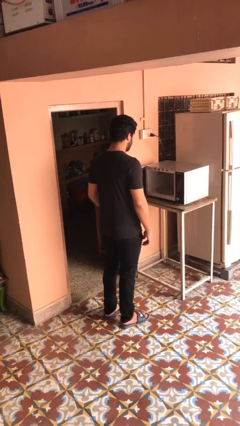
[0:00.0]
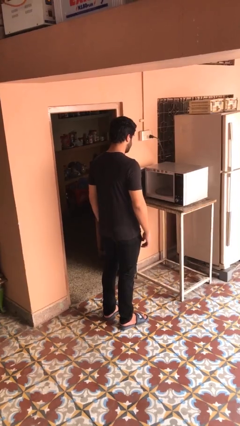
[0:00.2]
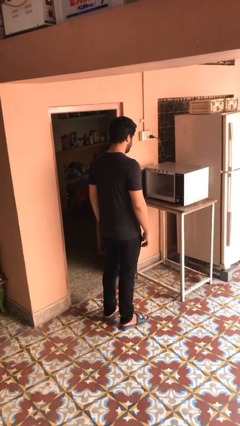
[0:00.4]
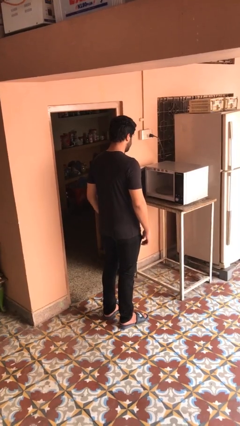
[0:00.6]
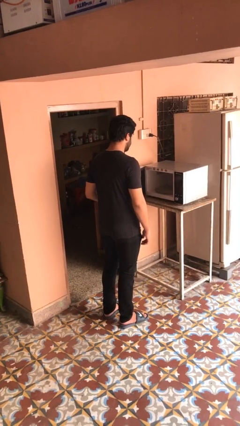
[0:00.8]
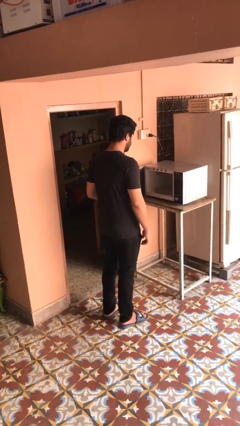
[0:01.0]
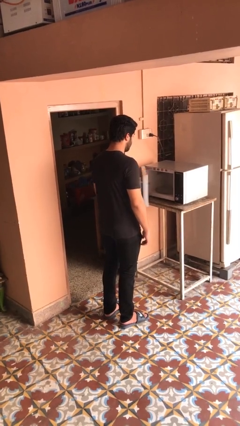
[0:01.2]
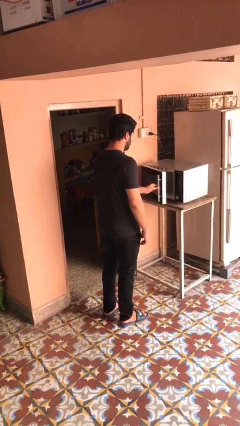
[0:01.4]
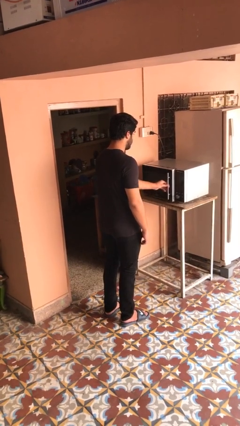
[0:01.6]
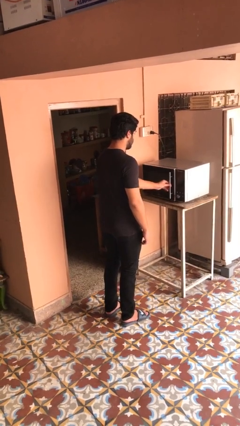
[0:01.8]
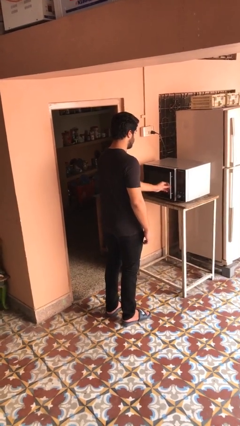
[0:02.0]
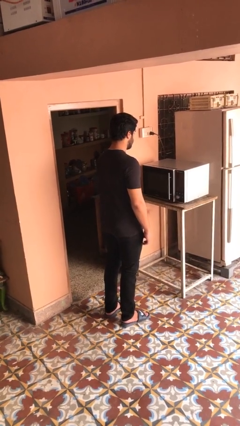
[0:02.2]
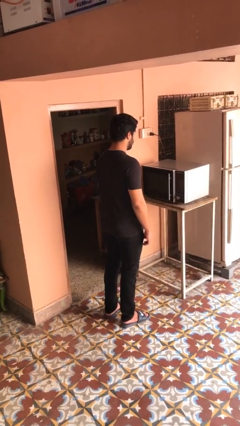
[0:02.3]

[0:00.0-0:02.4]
person closes microwave

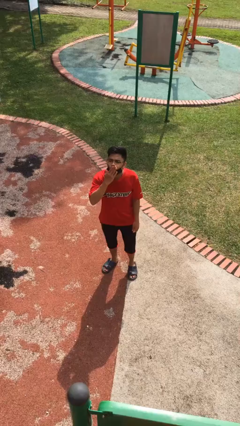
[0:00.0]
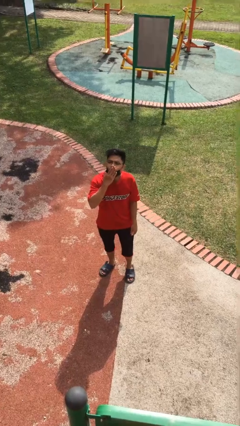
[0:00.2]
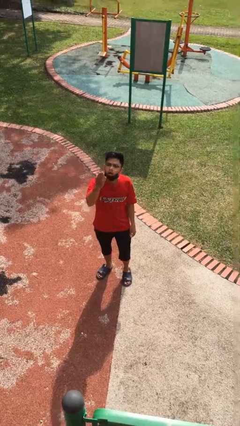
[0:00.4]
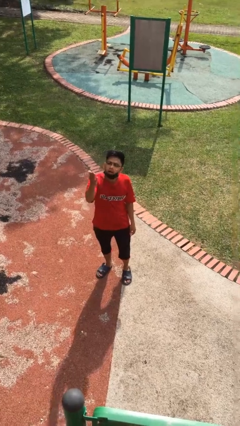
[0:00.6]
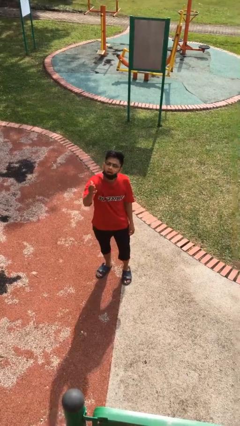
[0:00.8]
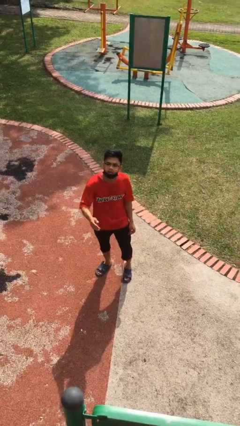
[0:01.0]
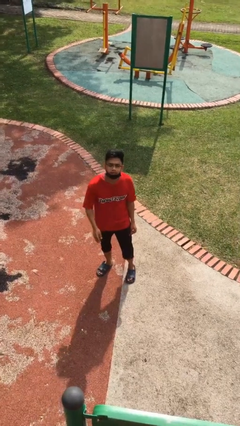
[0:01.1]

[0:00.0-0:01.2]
person gestures blow kiss

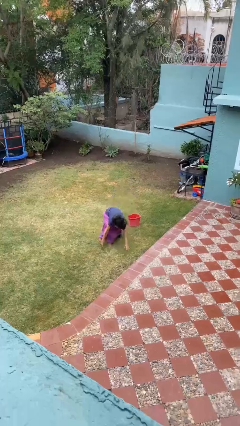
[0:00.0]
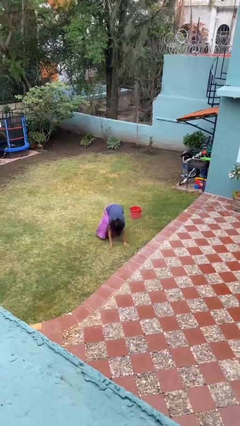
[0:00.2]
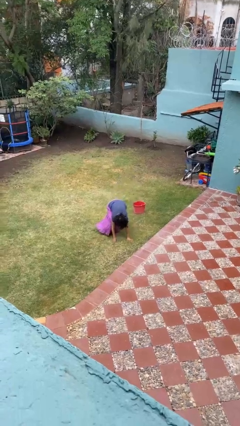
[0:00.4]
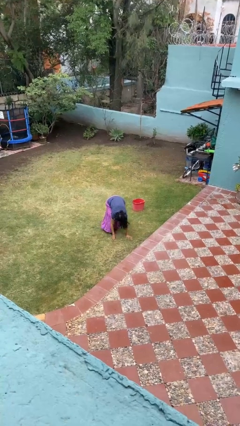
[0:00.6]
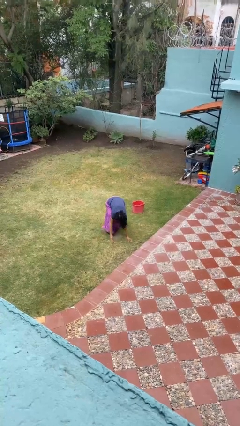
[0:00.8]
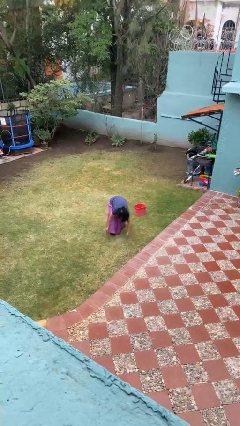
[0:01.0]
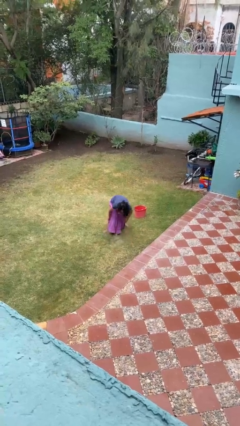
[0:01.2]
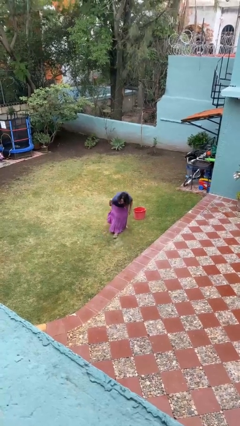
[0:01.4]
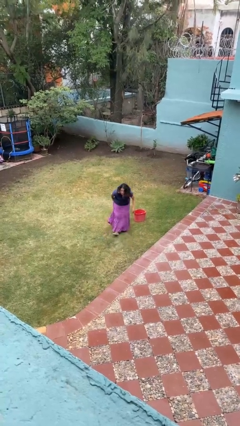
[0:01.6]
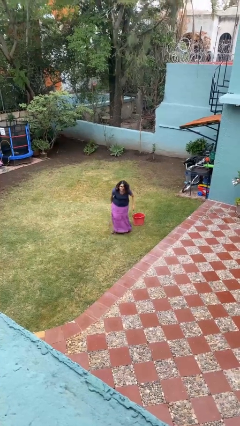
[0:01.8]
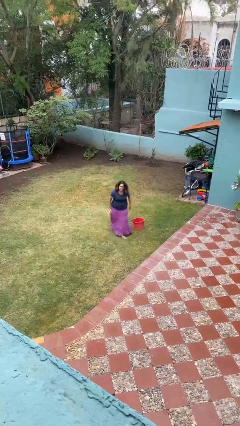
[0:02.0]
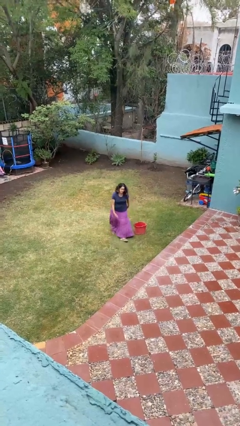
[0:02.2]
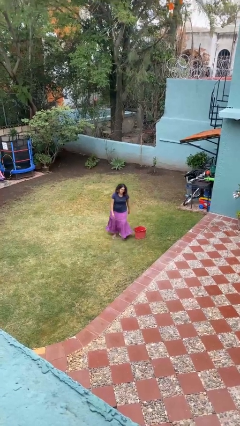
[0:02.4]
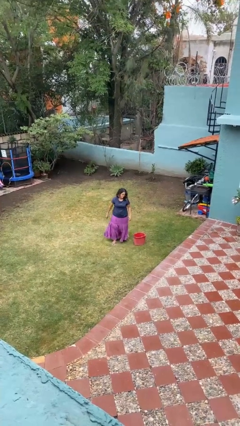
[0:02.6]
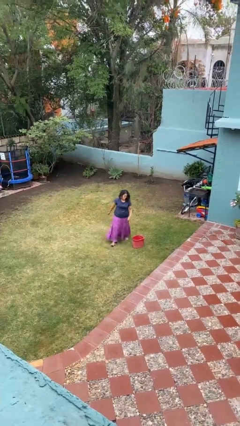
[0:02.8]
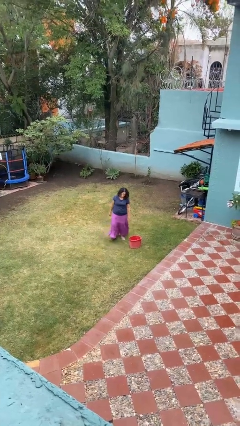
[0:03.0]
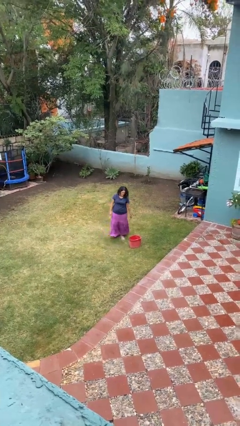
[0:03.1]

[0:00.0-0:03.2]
person stands up from floor

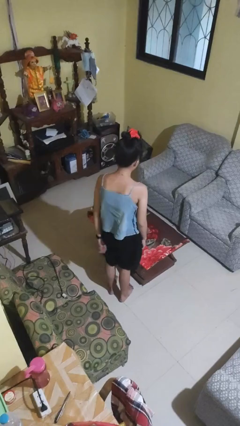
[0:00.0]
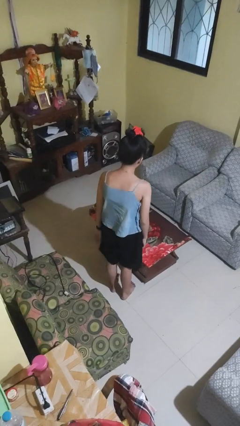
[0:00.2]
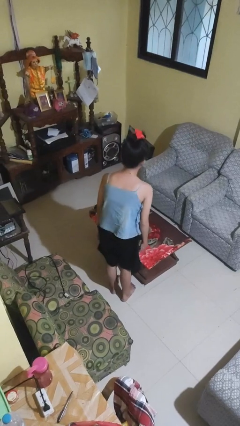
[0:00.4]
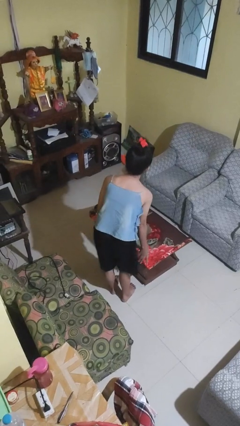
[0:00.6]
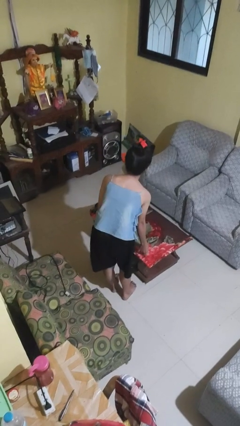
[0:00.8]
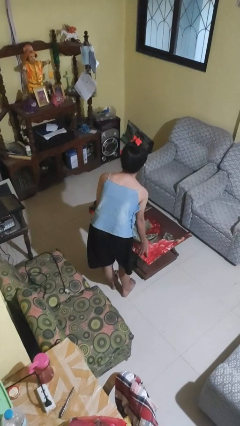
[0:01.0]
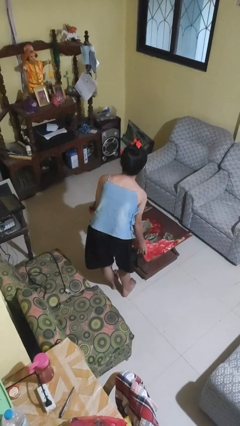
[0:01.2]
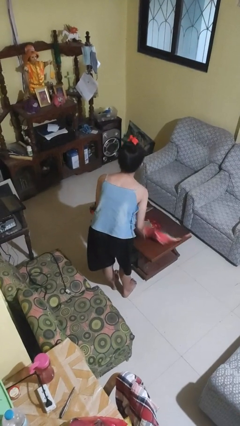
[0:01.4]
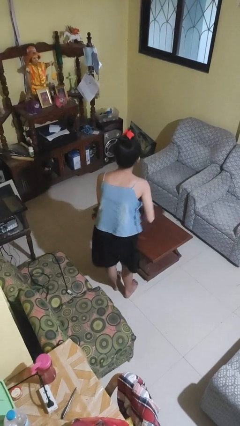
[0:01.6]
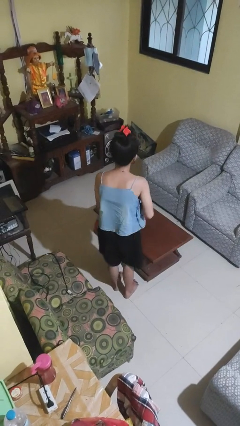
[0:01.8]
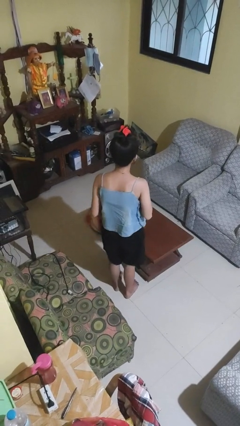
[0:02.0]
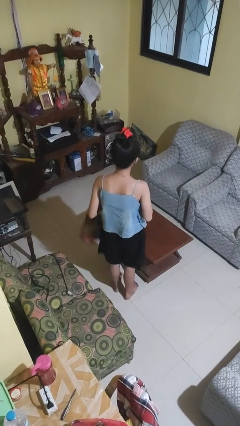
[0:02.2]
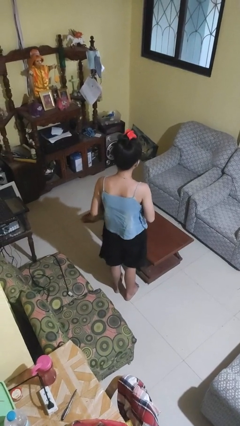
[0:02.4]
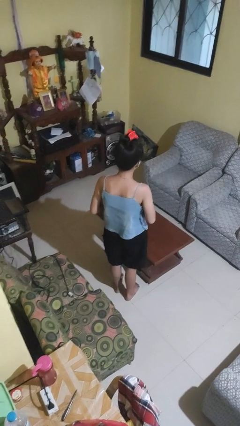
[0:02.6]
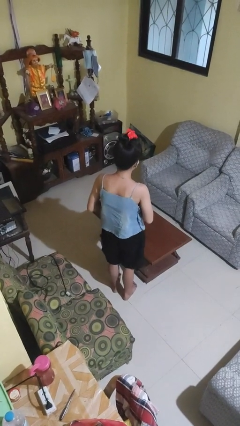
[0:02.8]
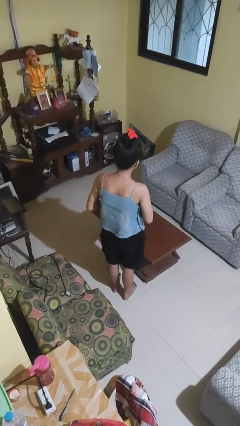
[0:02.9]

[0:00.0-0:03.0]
person folds tablecloth

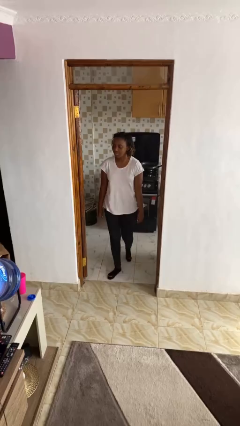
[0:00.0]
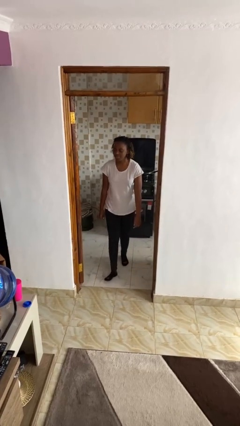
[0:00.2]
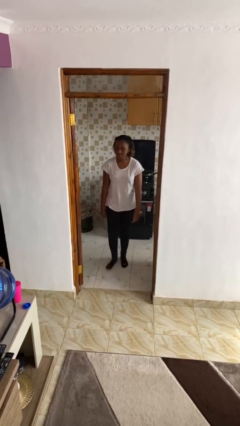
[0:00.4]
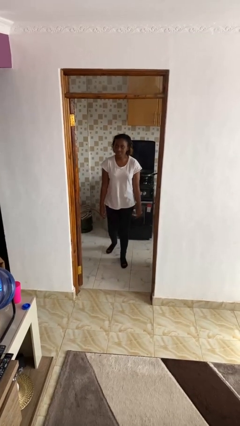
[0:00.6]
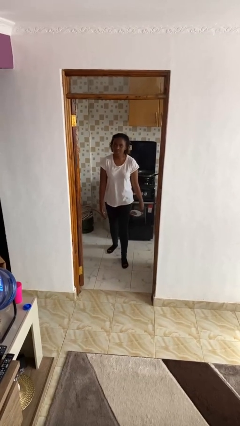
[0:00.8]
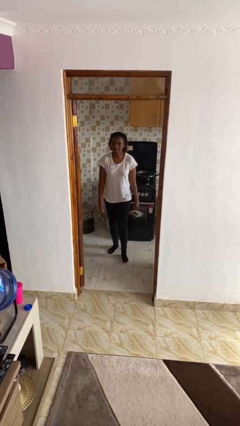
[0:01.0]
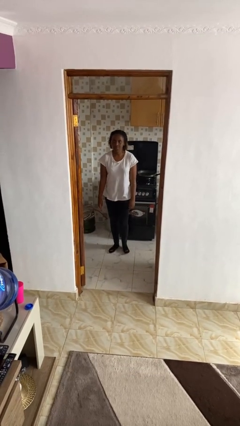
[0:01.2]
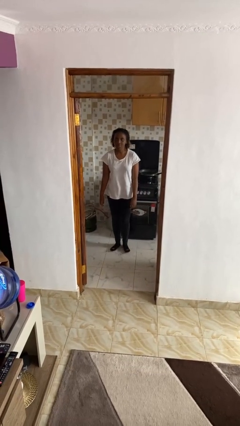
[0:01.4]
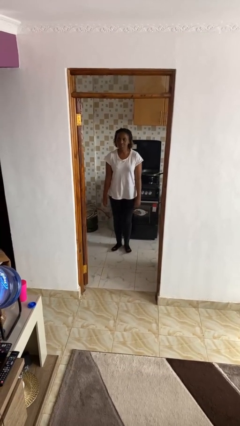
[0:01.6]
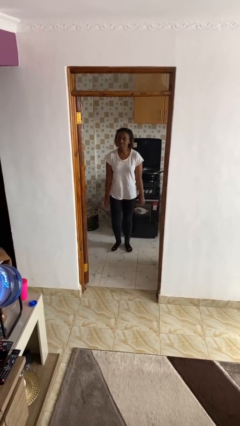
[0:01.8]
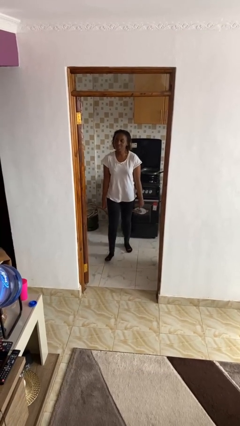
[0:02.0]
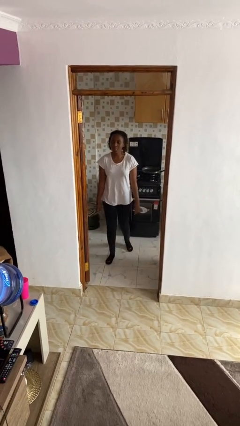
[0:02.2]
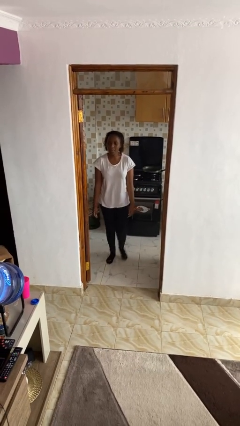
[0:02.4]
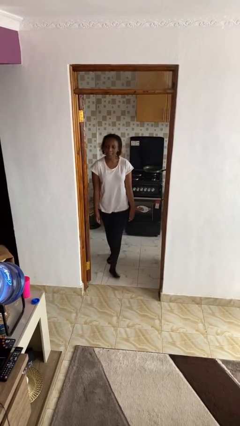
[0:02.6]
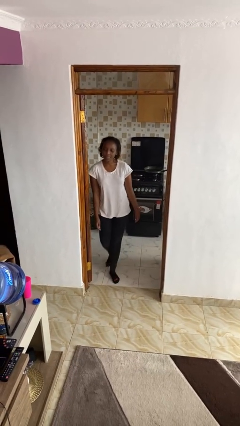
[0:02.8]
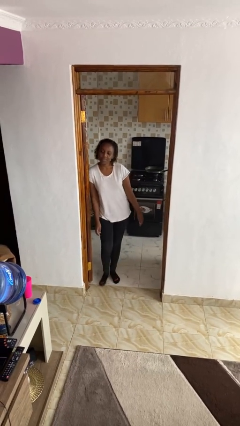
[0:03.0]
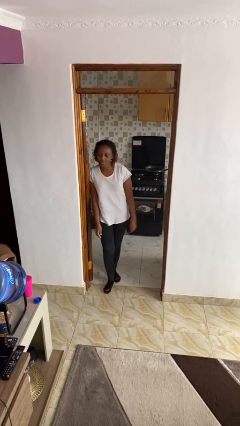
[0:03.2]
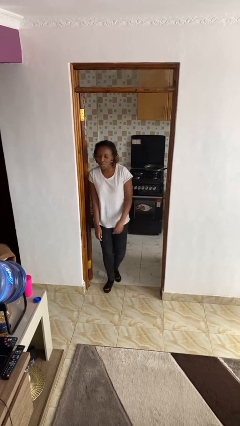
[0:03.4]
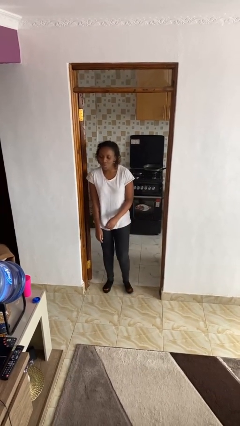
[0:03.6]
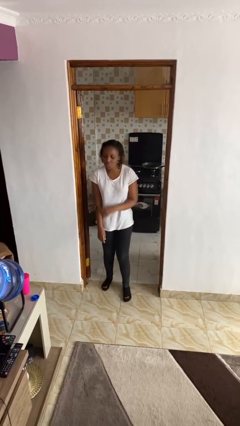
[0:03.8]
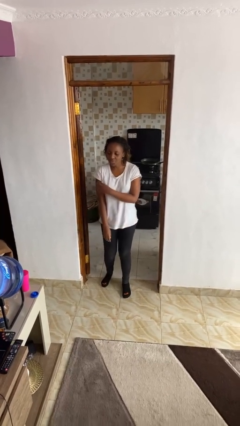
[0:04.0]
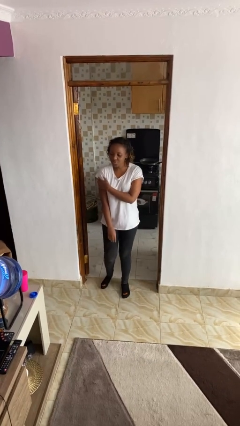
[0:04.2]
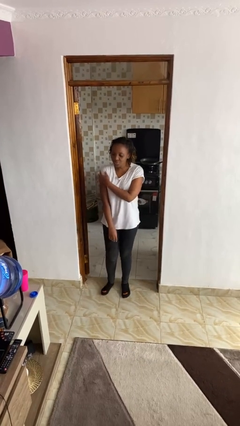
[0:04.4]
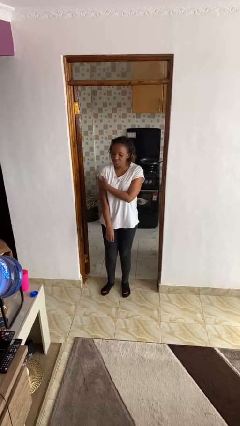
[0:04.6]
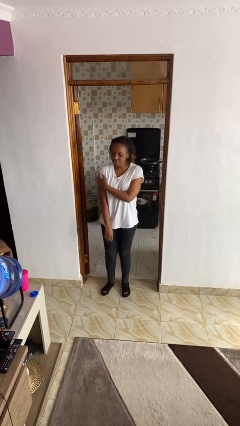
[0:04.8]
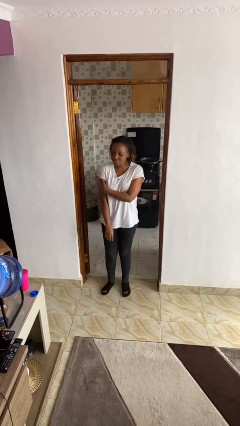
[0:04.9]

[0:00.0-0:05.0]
person bumps into wall

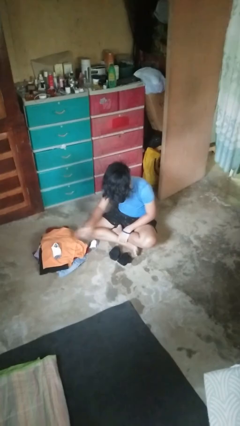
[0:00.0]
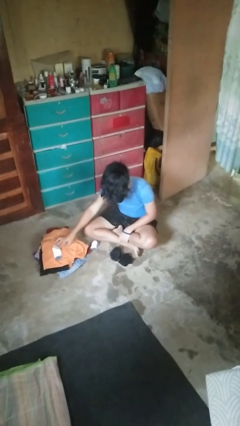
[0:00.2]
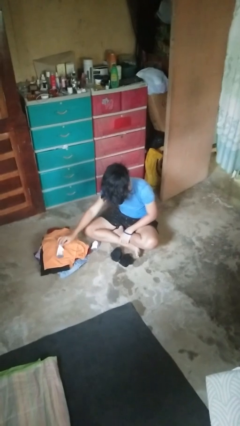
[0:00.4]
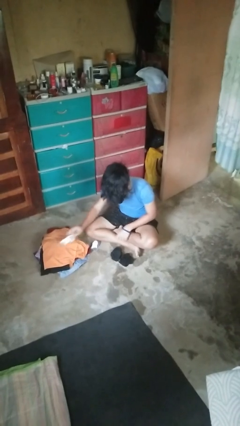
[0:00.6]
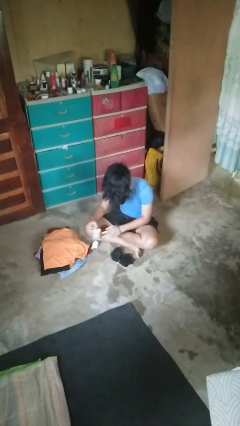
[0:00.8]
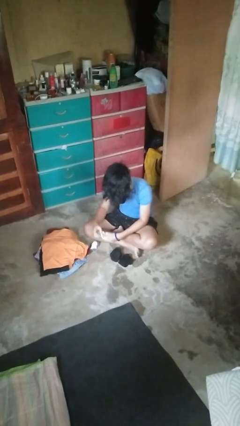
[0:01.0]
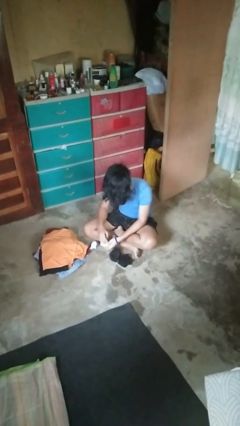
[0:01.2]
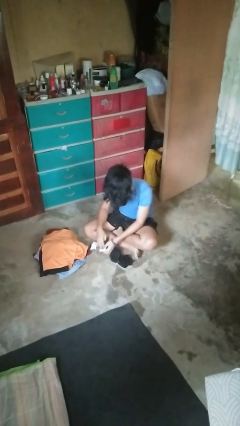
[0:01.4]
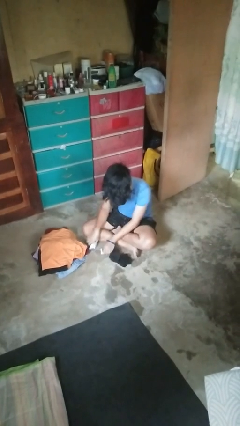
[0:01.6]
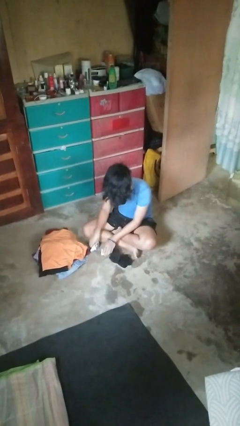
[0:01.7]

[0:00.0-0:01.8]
person folds socks

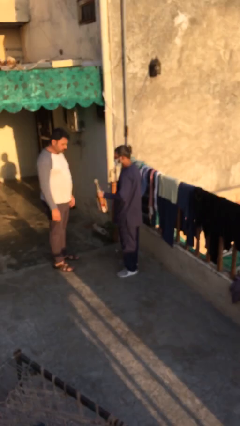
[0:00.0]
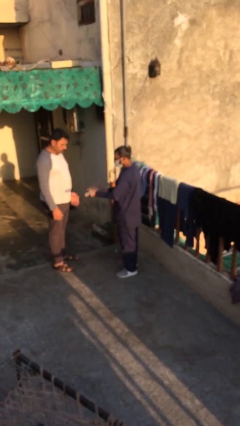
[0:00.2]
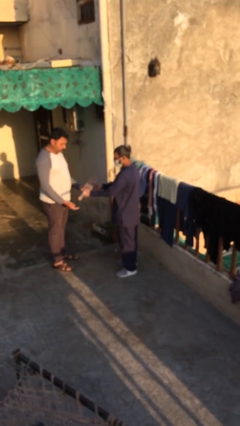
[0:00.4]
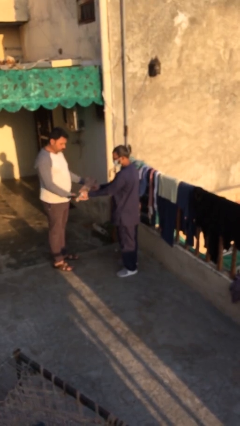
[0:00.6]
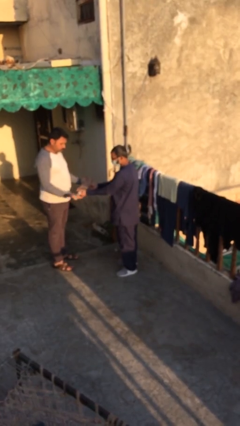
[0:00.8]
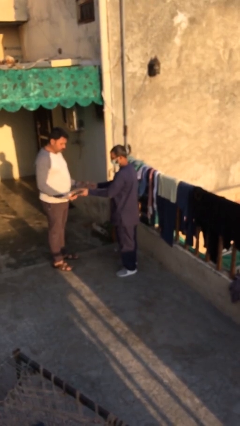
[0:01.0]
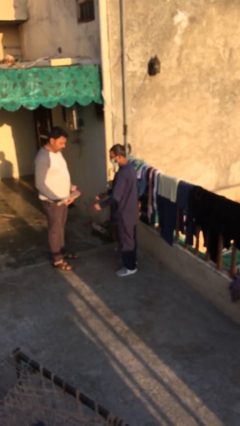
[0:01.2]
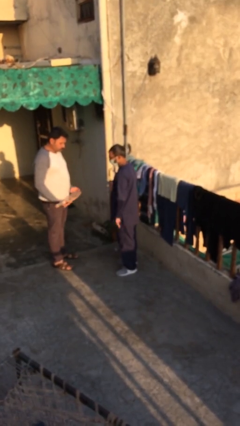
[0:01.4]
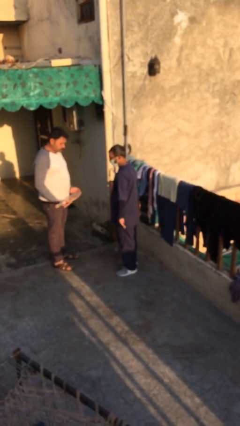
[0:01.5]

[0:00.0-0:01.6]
person transfers object to person
